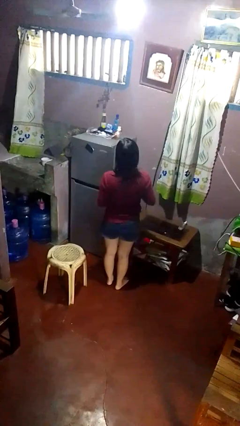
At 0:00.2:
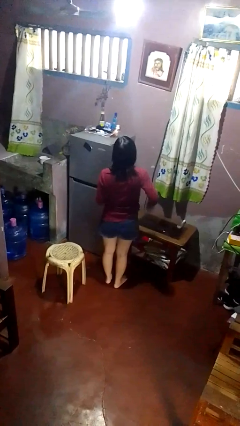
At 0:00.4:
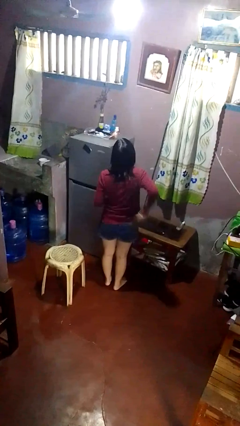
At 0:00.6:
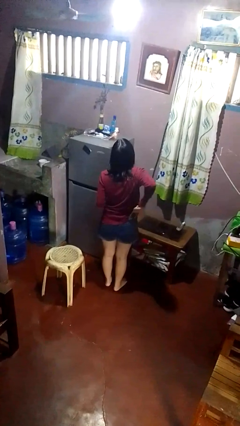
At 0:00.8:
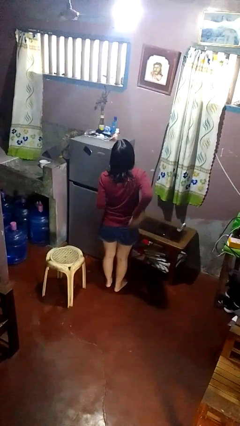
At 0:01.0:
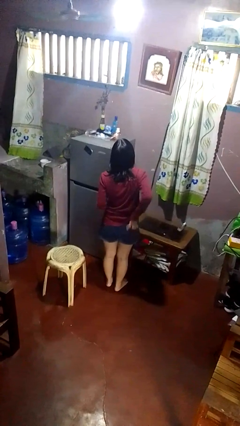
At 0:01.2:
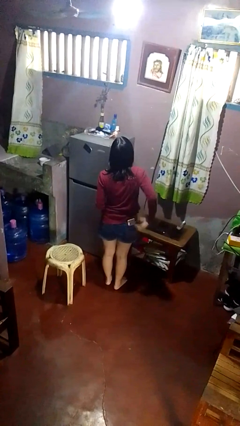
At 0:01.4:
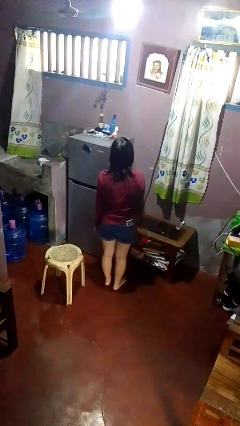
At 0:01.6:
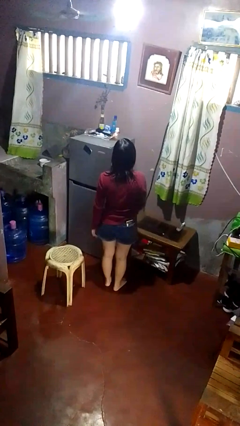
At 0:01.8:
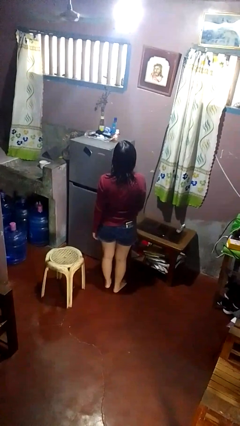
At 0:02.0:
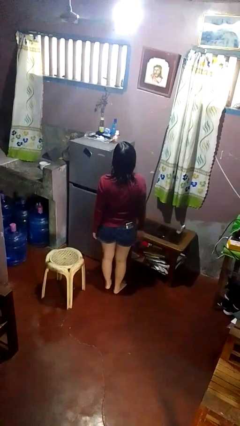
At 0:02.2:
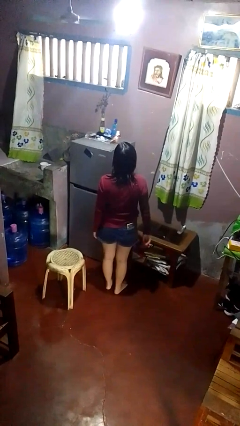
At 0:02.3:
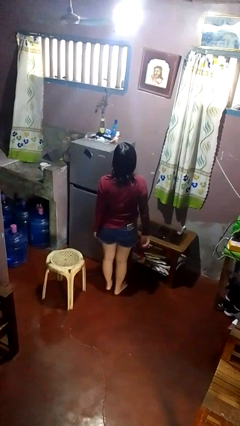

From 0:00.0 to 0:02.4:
person puts phone into pocket

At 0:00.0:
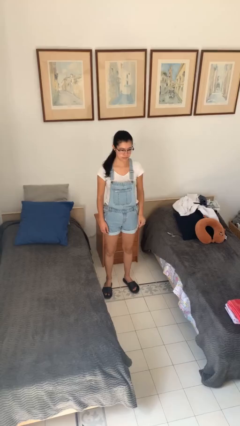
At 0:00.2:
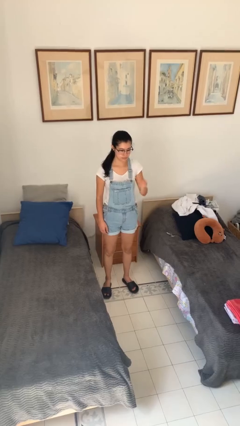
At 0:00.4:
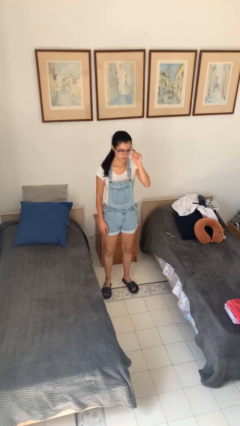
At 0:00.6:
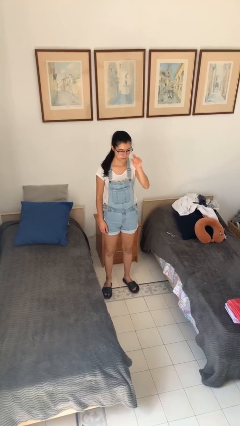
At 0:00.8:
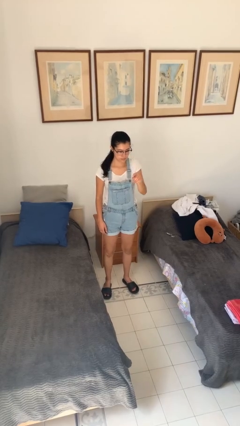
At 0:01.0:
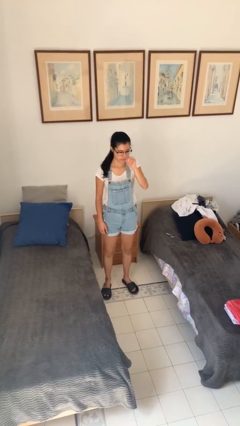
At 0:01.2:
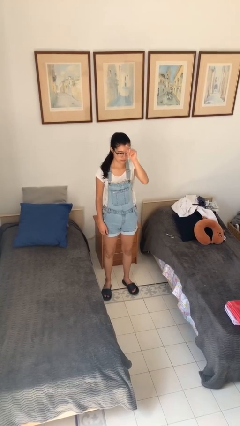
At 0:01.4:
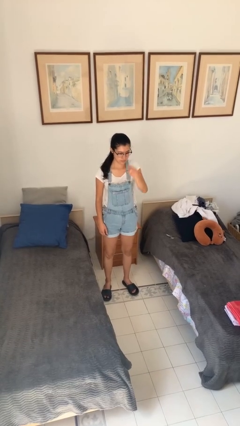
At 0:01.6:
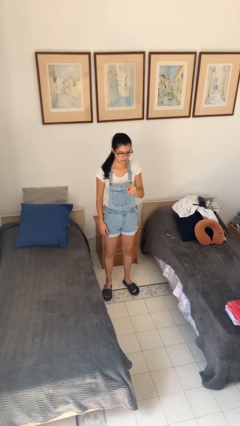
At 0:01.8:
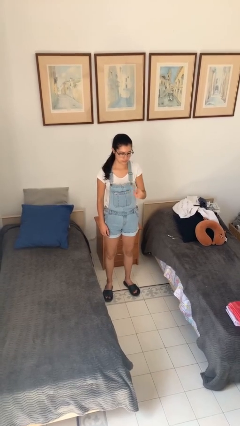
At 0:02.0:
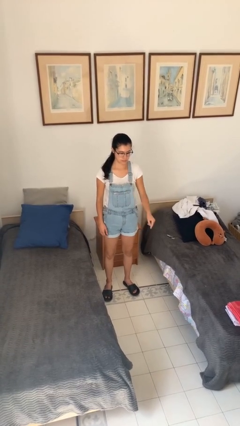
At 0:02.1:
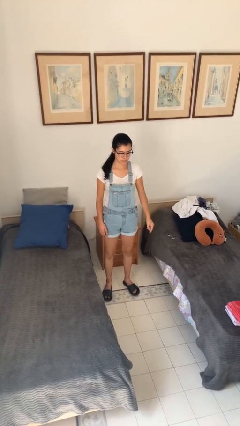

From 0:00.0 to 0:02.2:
person gestures number four

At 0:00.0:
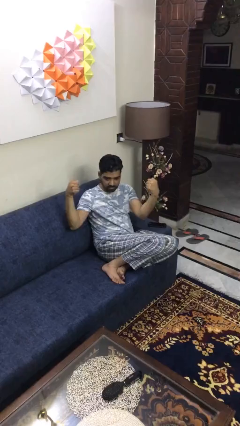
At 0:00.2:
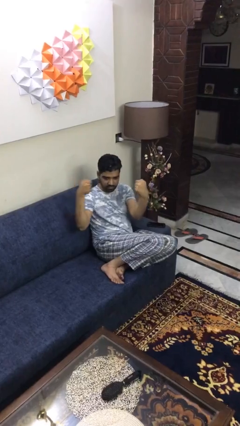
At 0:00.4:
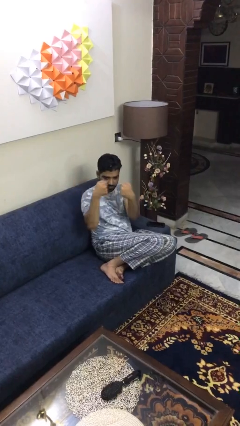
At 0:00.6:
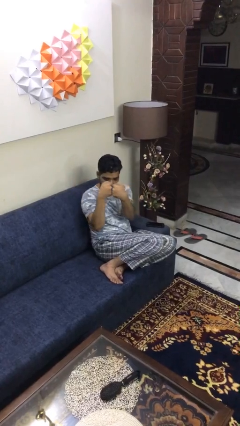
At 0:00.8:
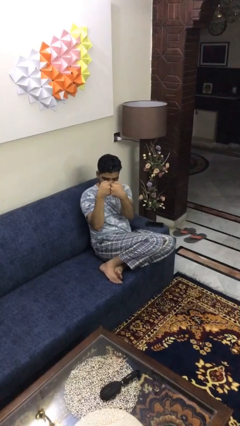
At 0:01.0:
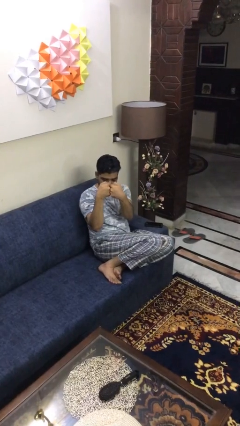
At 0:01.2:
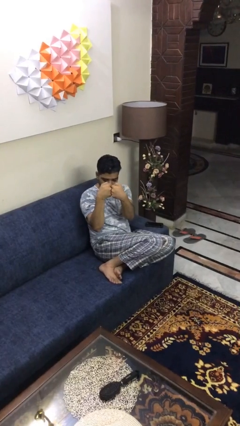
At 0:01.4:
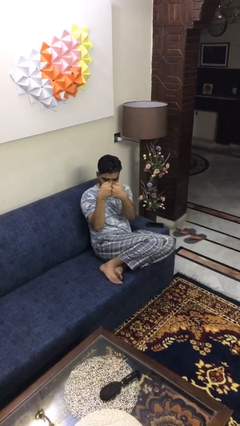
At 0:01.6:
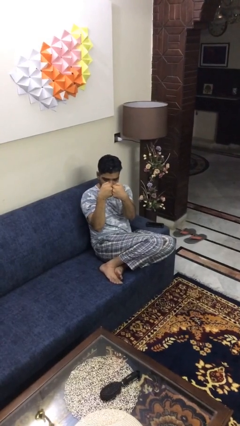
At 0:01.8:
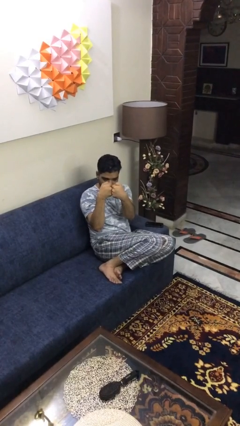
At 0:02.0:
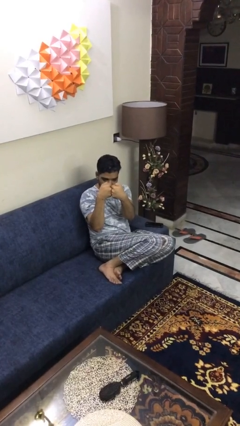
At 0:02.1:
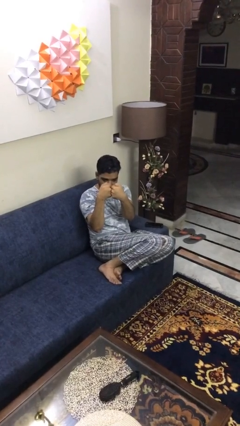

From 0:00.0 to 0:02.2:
person gestures zoom out

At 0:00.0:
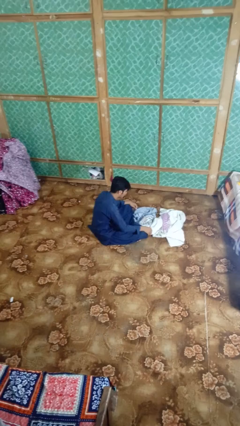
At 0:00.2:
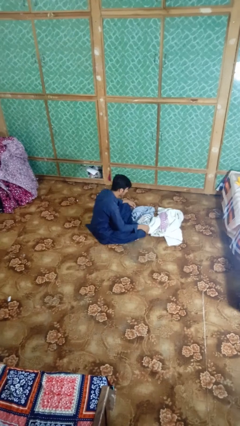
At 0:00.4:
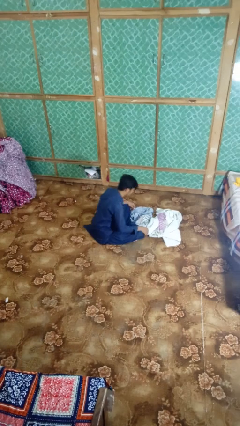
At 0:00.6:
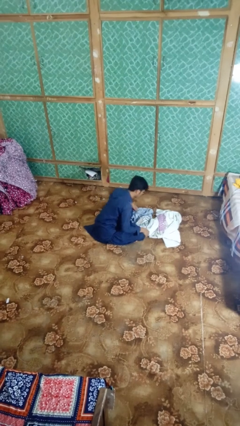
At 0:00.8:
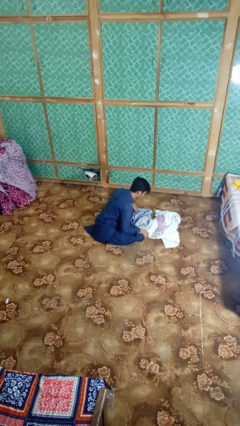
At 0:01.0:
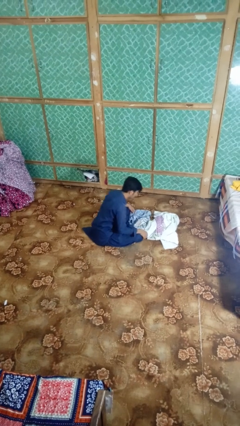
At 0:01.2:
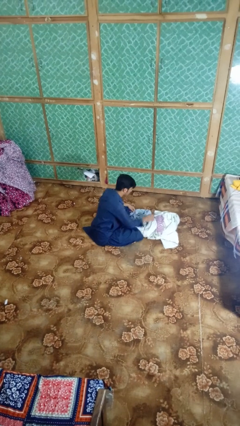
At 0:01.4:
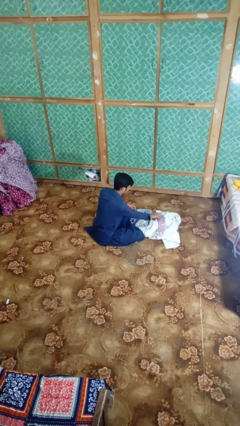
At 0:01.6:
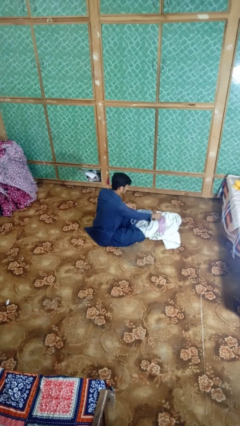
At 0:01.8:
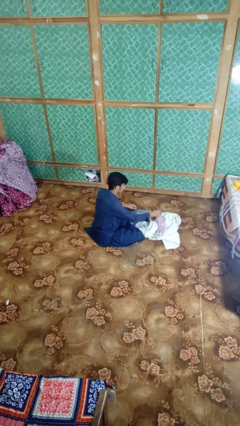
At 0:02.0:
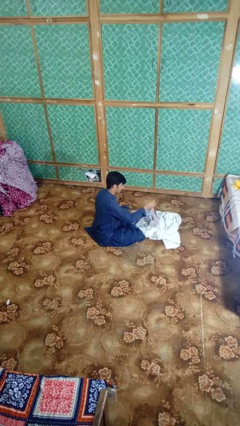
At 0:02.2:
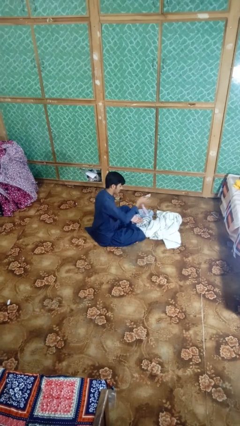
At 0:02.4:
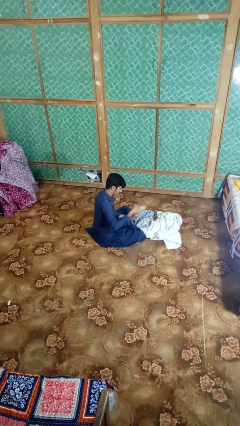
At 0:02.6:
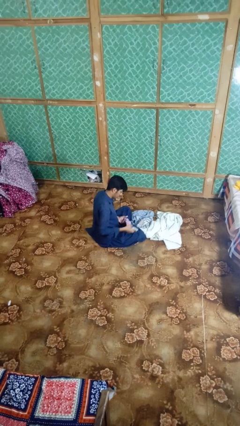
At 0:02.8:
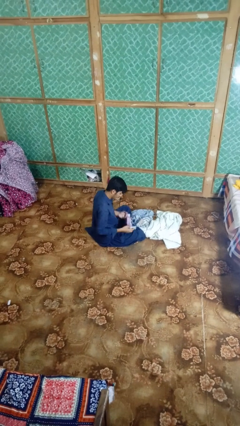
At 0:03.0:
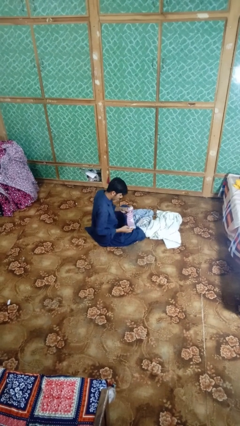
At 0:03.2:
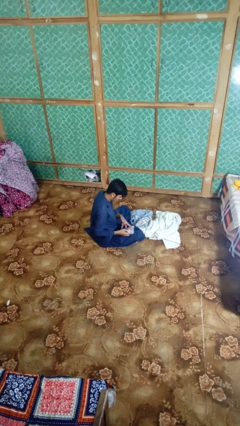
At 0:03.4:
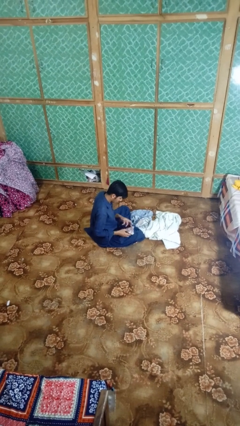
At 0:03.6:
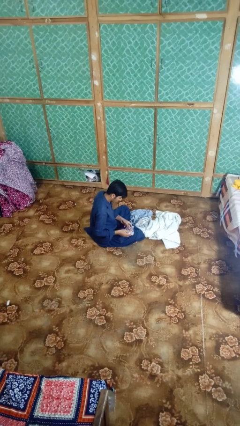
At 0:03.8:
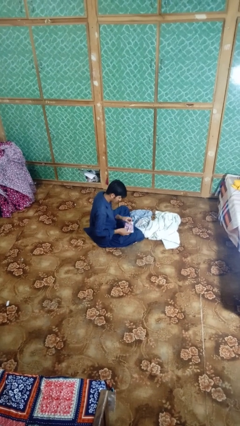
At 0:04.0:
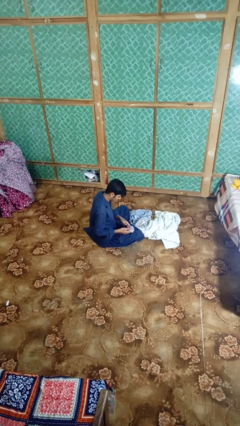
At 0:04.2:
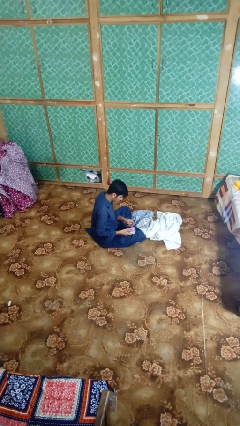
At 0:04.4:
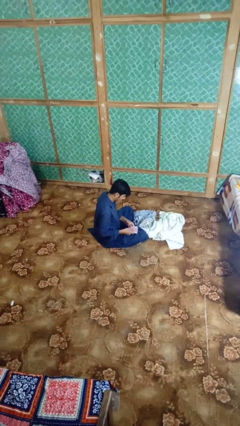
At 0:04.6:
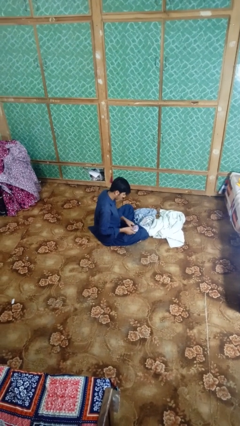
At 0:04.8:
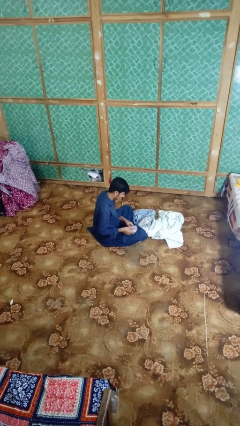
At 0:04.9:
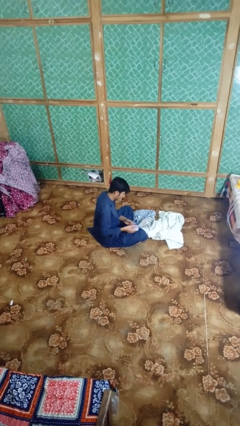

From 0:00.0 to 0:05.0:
person folds socks

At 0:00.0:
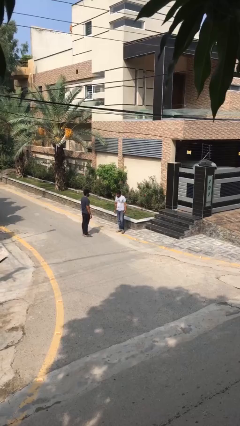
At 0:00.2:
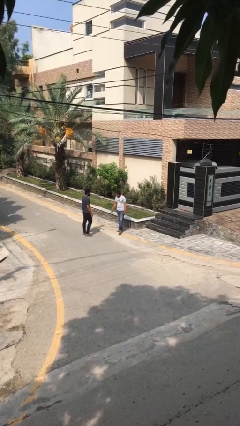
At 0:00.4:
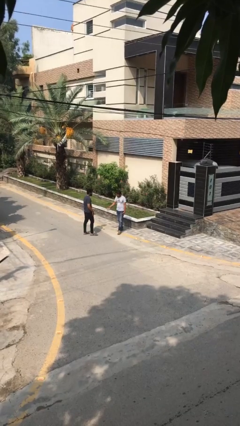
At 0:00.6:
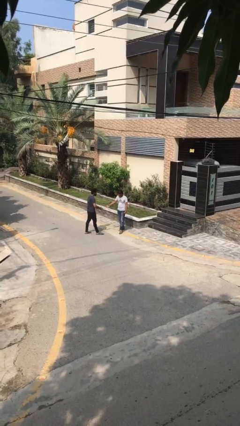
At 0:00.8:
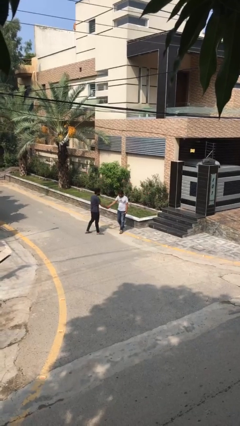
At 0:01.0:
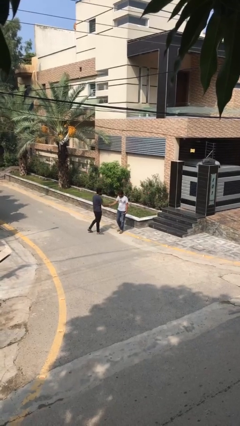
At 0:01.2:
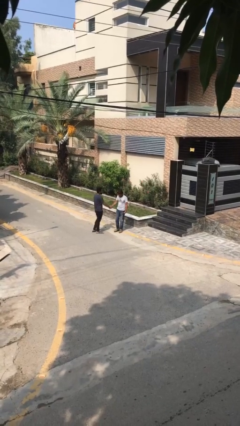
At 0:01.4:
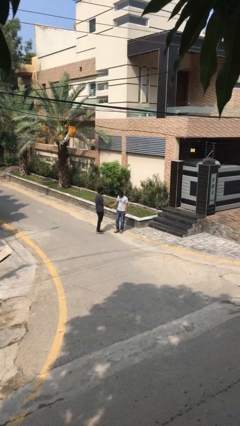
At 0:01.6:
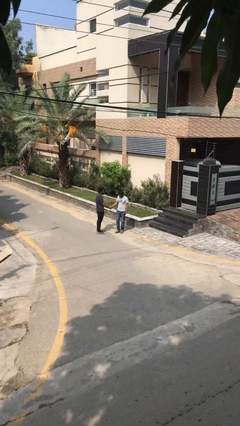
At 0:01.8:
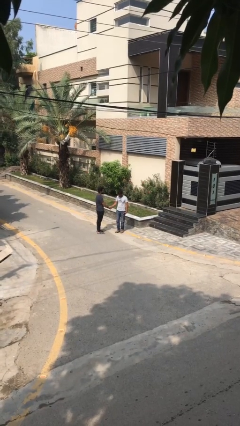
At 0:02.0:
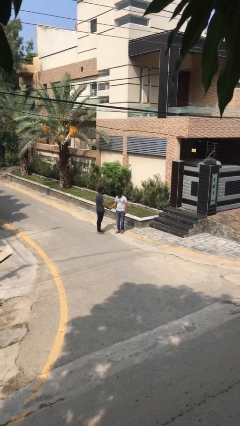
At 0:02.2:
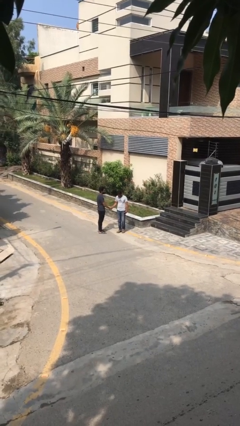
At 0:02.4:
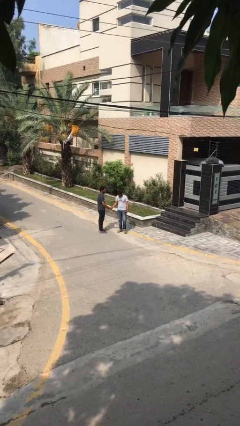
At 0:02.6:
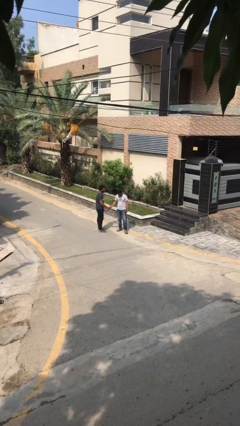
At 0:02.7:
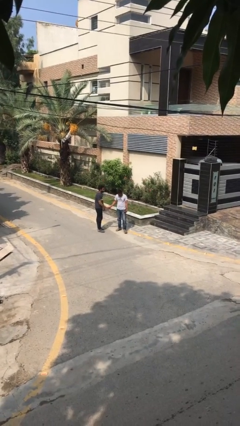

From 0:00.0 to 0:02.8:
person shakes hand

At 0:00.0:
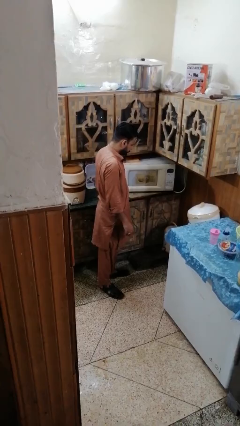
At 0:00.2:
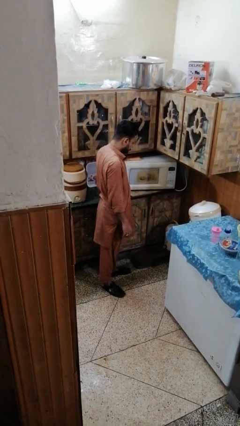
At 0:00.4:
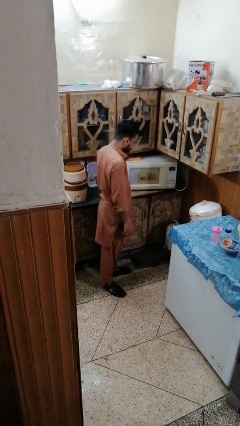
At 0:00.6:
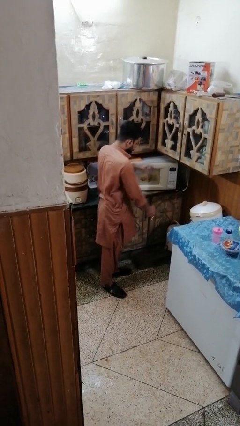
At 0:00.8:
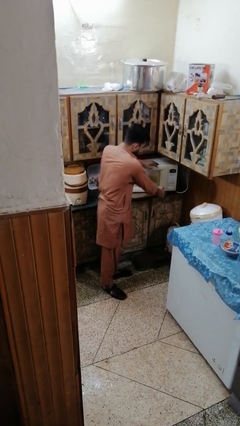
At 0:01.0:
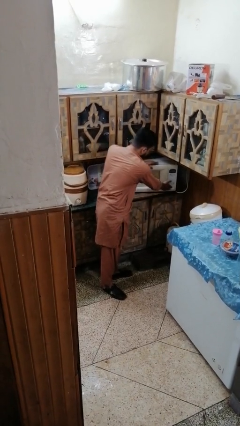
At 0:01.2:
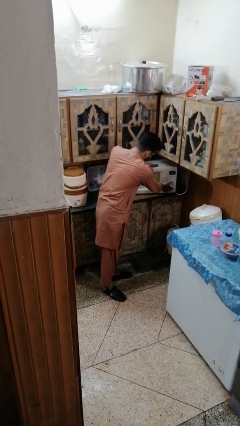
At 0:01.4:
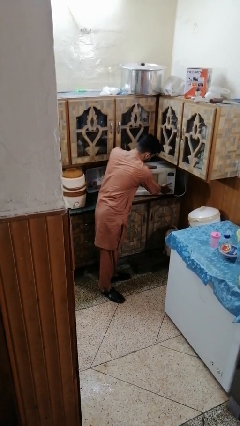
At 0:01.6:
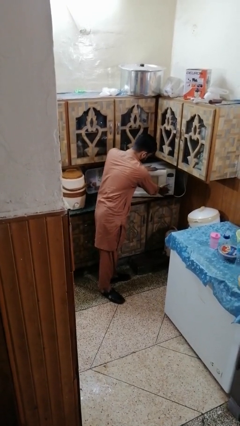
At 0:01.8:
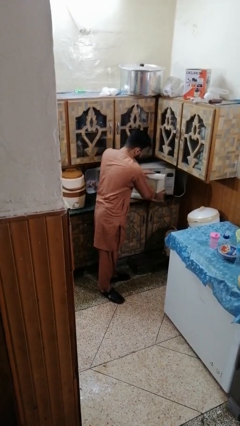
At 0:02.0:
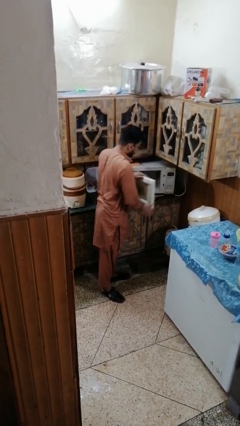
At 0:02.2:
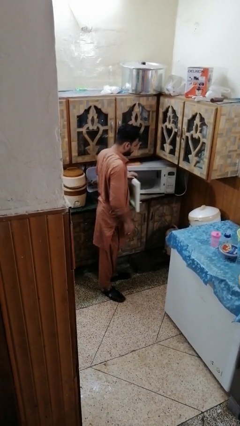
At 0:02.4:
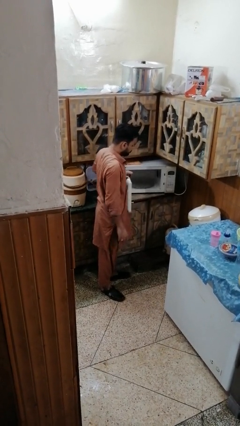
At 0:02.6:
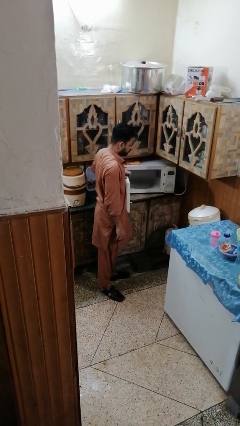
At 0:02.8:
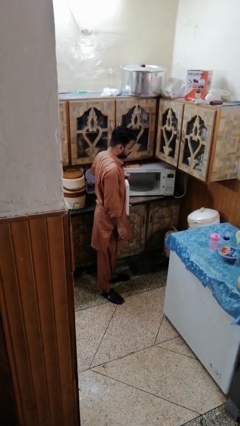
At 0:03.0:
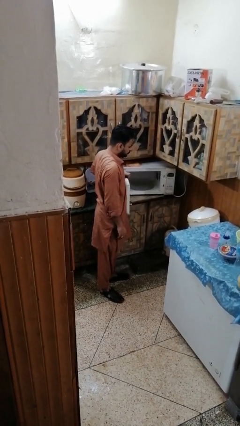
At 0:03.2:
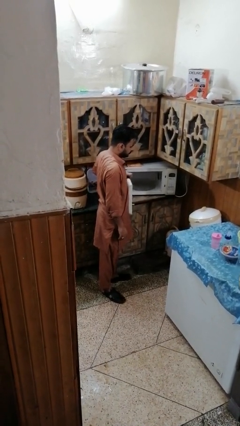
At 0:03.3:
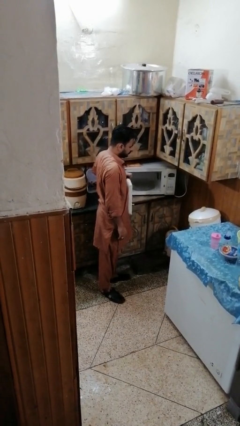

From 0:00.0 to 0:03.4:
person opens microwave
